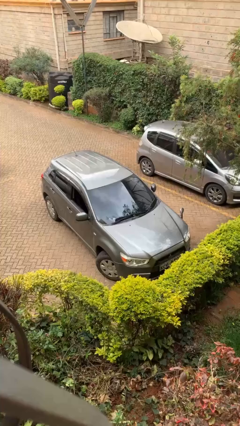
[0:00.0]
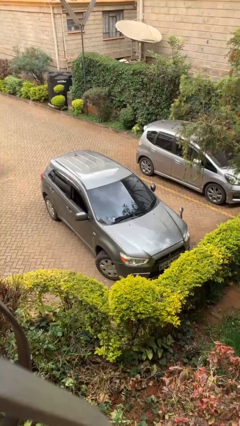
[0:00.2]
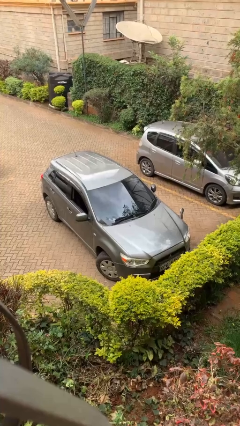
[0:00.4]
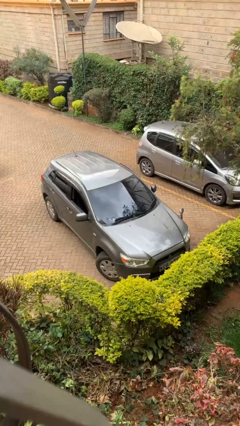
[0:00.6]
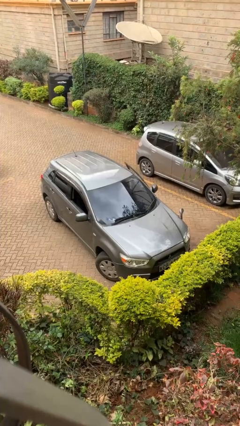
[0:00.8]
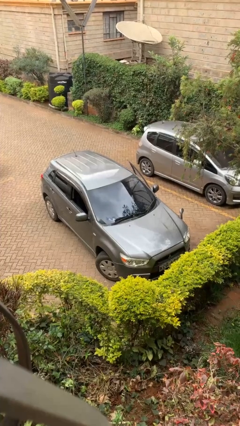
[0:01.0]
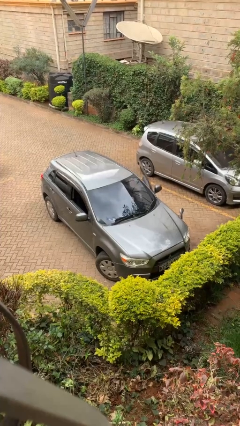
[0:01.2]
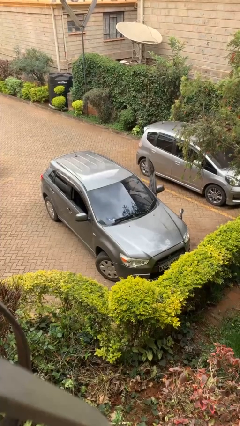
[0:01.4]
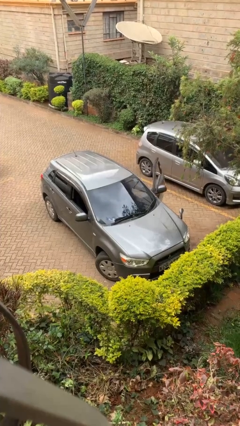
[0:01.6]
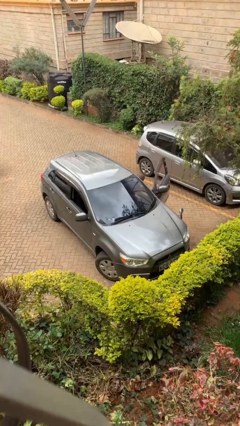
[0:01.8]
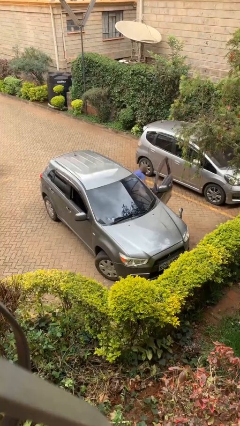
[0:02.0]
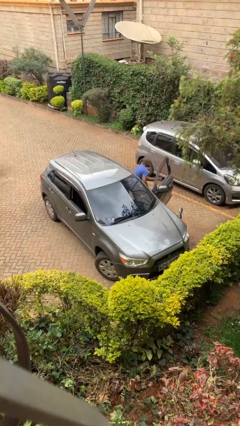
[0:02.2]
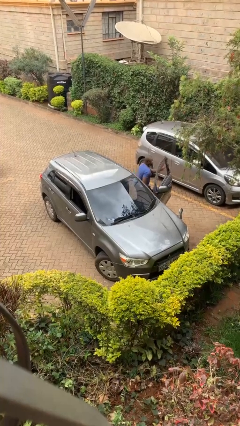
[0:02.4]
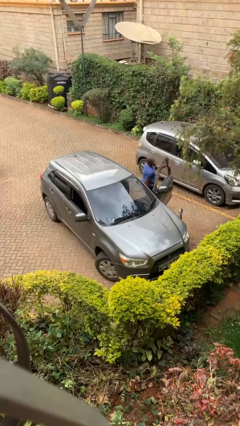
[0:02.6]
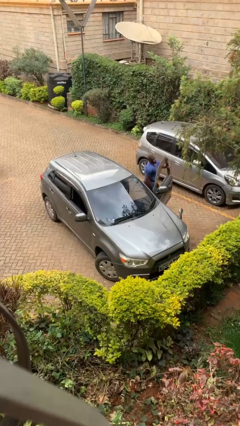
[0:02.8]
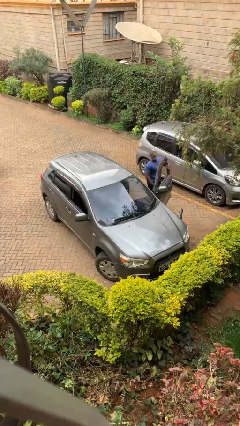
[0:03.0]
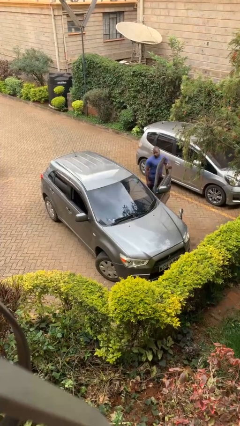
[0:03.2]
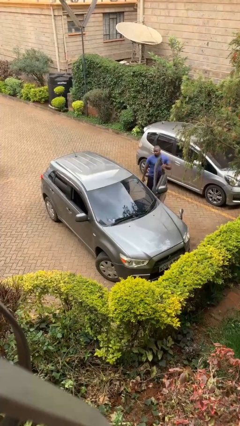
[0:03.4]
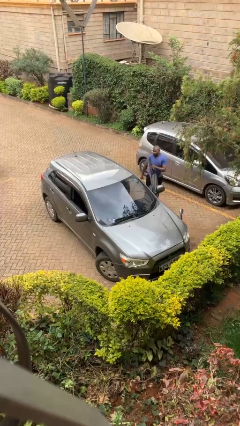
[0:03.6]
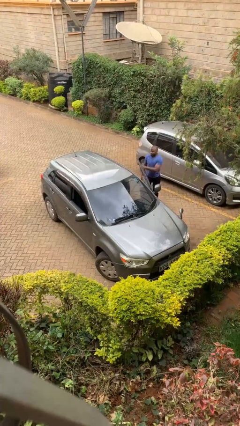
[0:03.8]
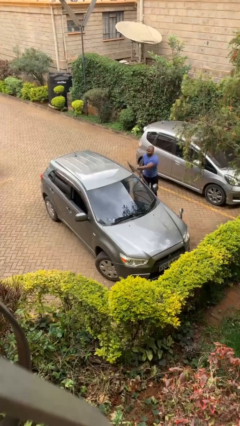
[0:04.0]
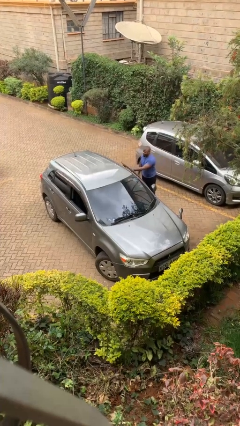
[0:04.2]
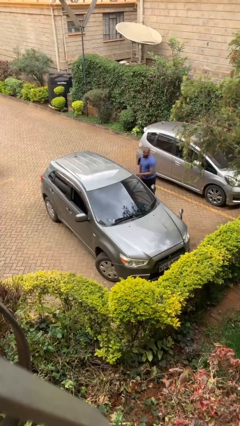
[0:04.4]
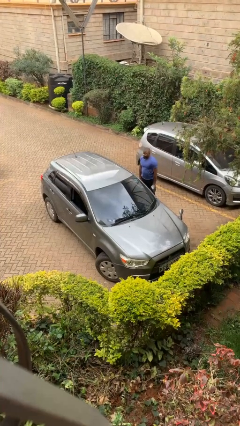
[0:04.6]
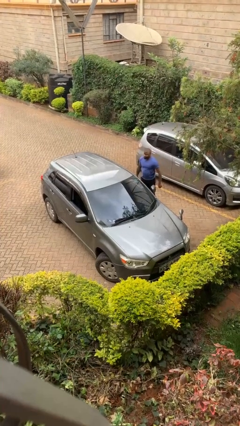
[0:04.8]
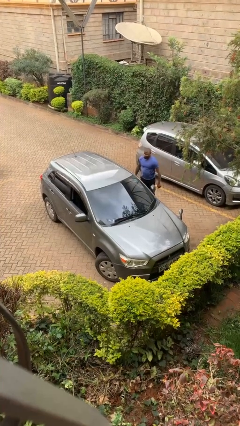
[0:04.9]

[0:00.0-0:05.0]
car drops off person

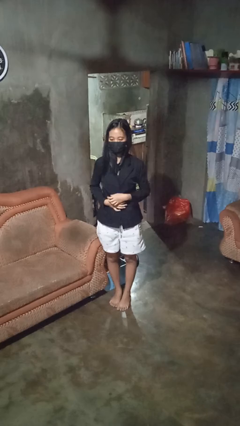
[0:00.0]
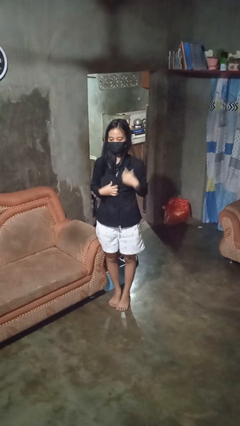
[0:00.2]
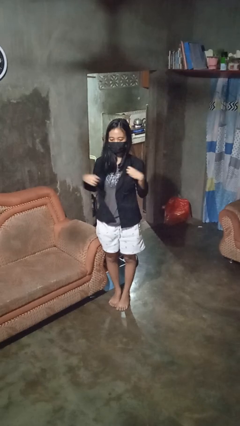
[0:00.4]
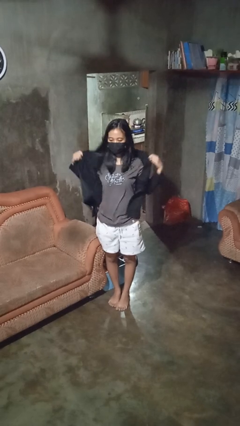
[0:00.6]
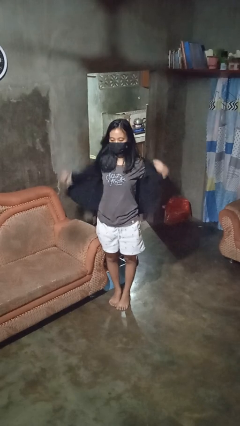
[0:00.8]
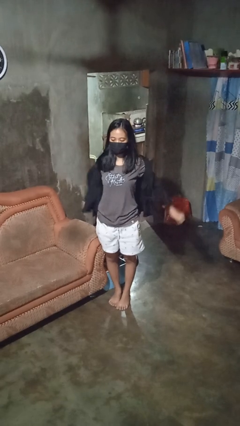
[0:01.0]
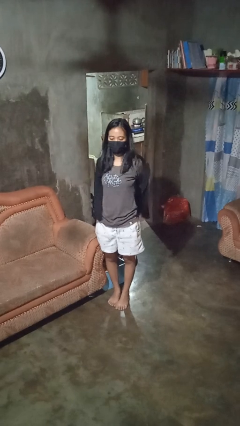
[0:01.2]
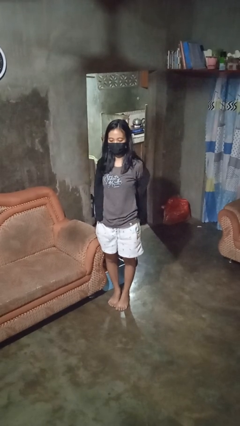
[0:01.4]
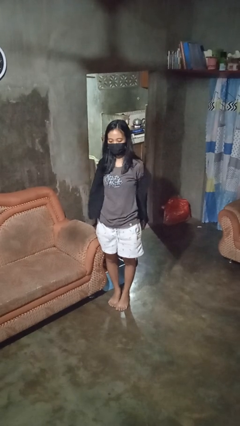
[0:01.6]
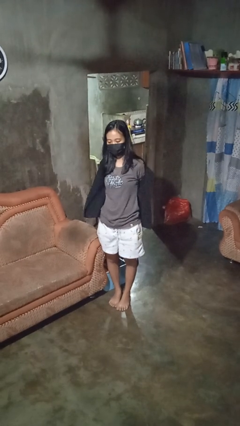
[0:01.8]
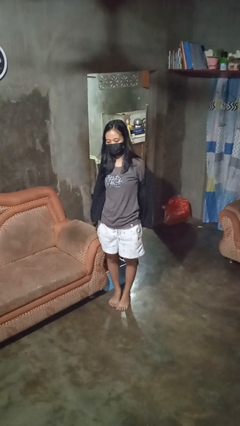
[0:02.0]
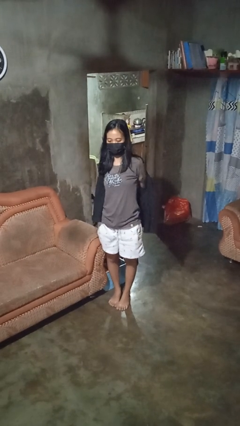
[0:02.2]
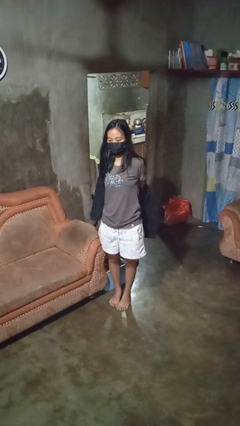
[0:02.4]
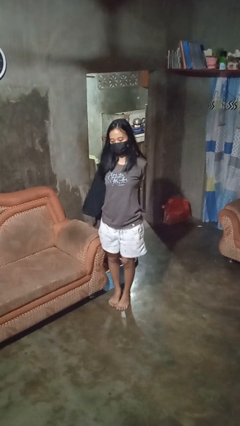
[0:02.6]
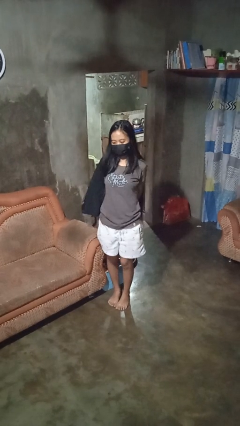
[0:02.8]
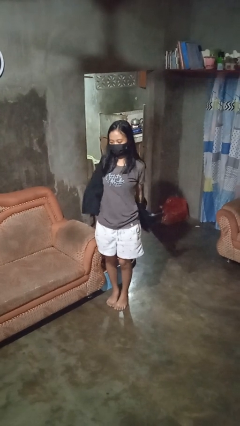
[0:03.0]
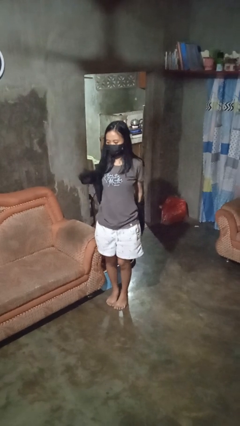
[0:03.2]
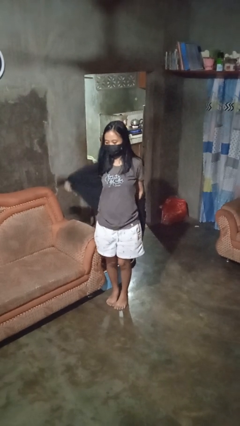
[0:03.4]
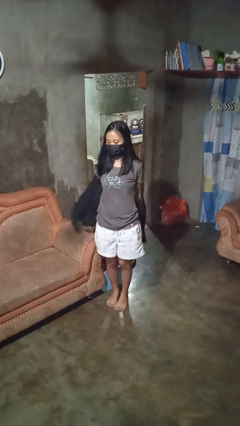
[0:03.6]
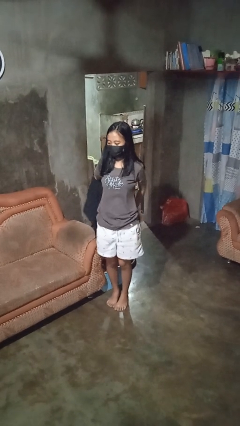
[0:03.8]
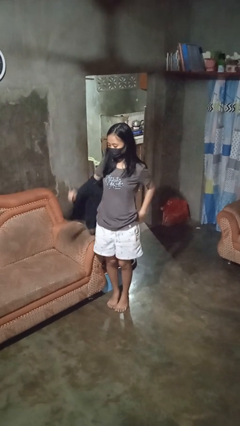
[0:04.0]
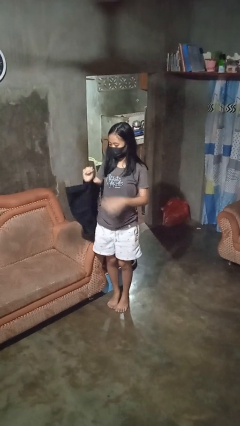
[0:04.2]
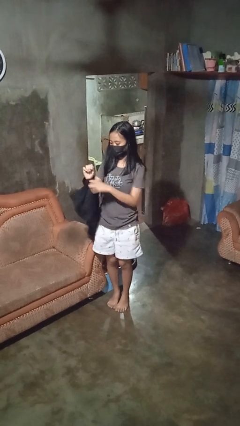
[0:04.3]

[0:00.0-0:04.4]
person takes off shirt

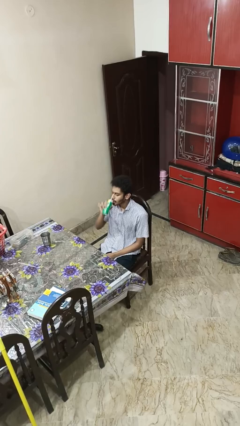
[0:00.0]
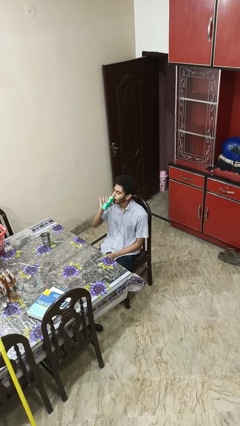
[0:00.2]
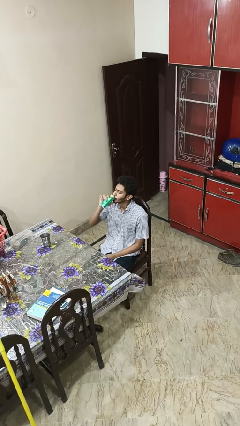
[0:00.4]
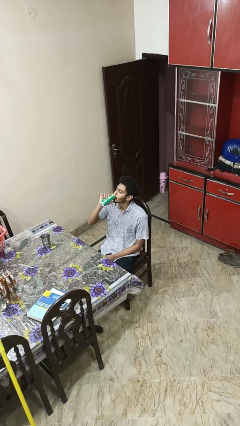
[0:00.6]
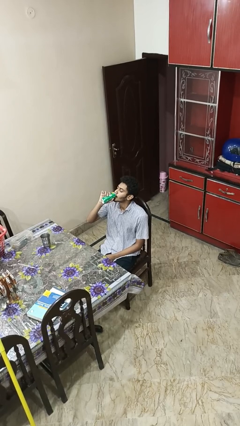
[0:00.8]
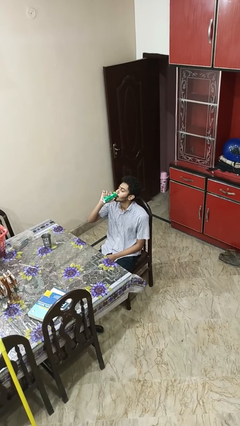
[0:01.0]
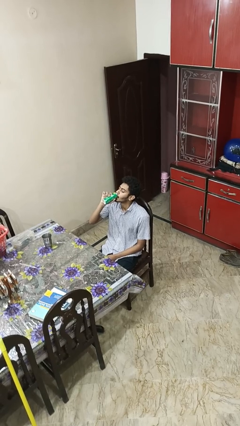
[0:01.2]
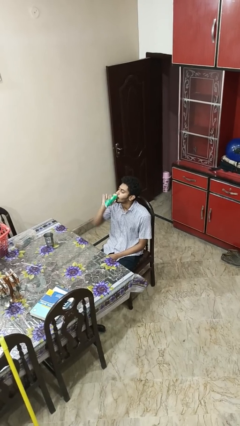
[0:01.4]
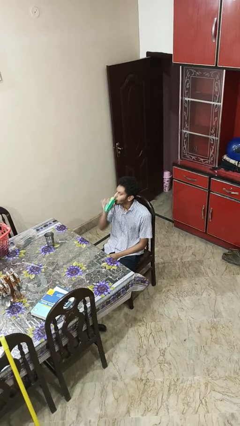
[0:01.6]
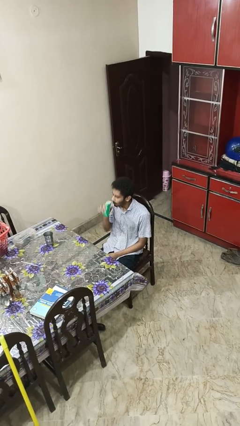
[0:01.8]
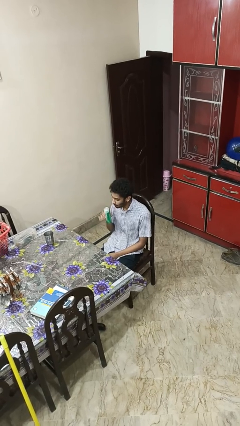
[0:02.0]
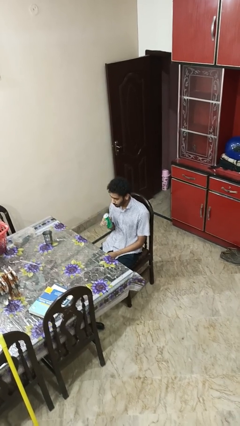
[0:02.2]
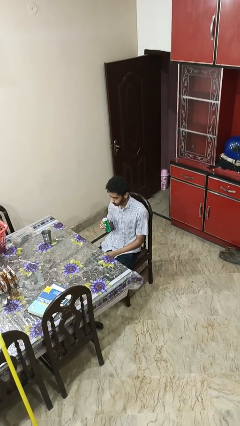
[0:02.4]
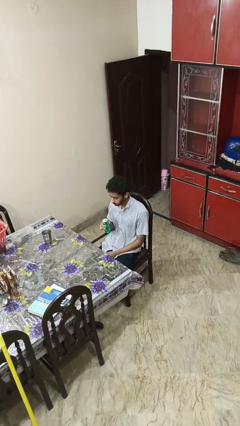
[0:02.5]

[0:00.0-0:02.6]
person drinks from beverage can

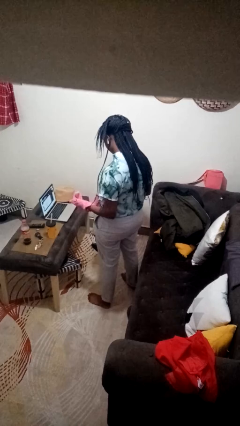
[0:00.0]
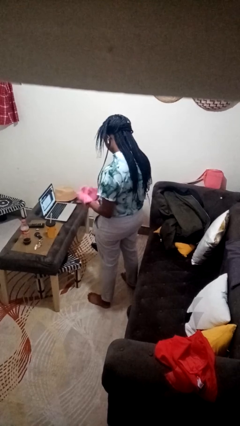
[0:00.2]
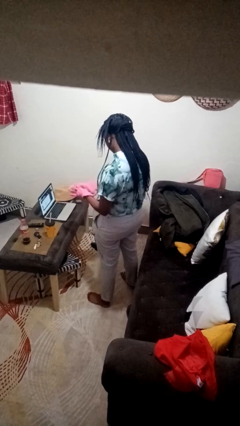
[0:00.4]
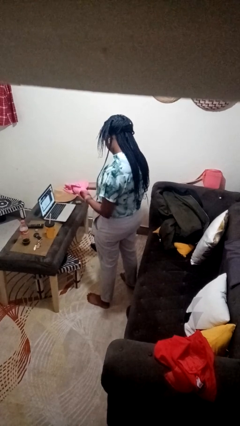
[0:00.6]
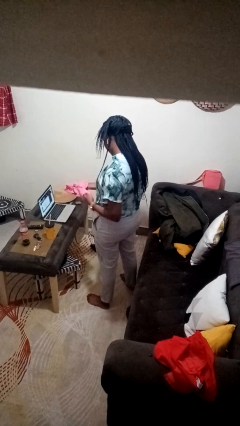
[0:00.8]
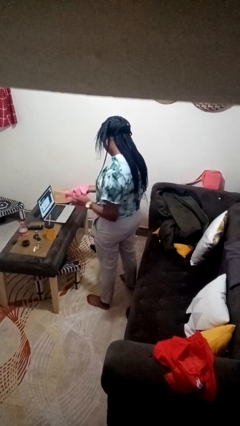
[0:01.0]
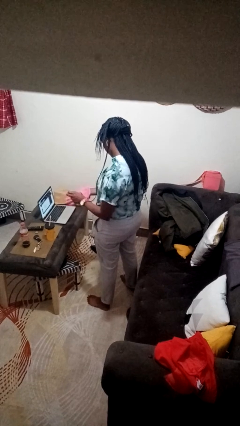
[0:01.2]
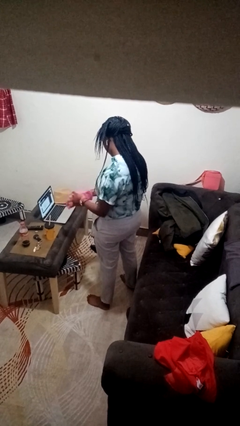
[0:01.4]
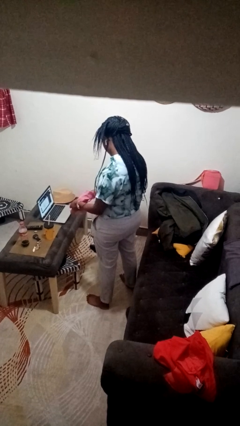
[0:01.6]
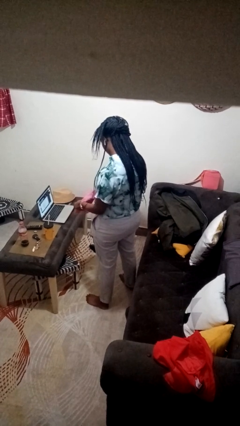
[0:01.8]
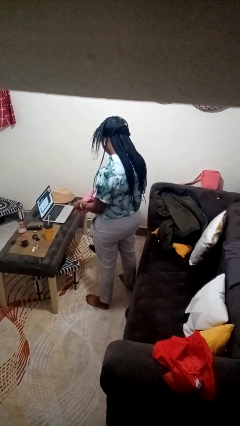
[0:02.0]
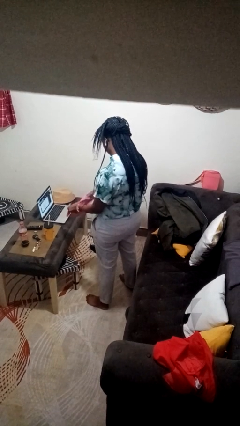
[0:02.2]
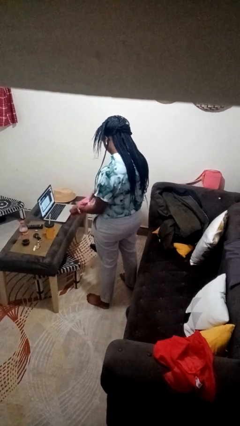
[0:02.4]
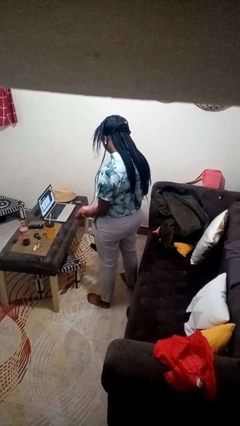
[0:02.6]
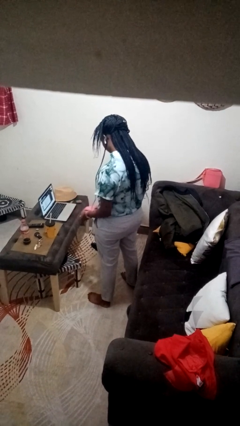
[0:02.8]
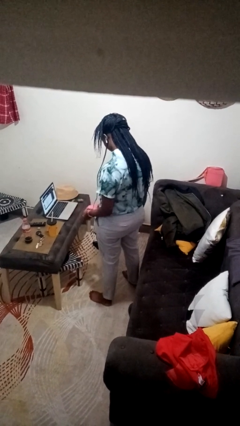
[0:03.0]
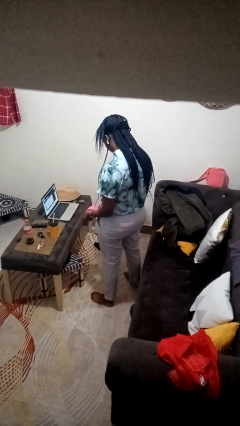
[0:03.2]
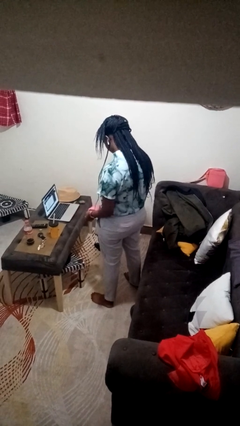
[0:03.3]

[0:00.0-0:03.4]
person takes off gloves

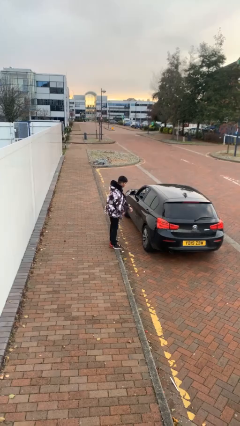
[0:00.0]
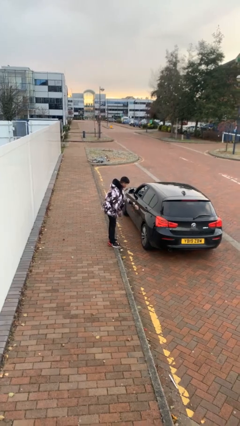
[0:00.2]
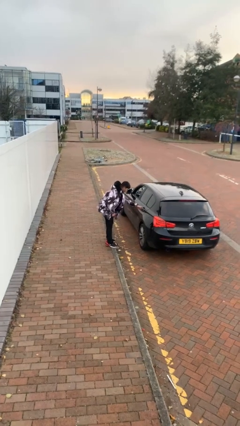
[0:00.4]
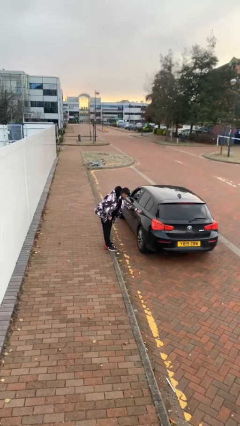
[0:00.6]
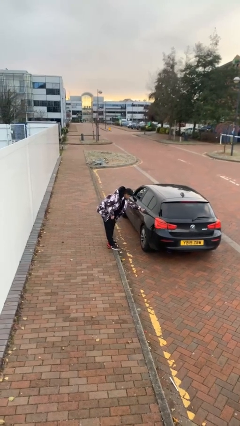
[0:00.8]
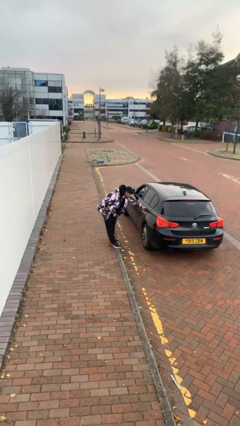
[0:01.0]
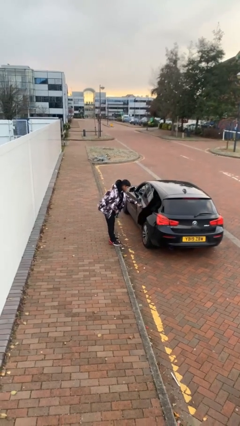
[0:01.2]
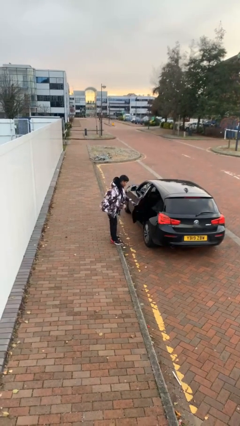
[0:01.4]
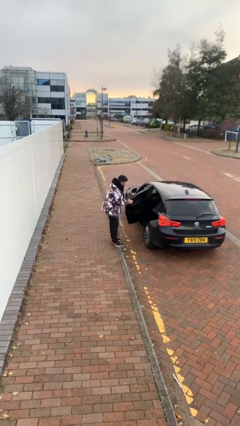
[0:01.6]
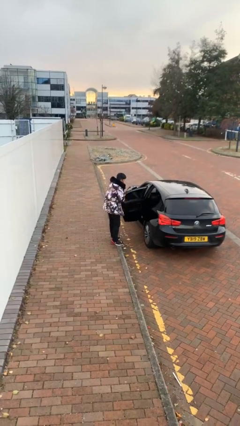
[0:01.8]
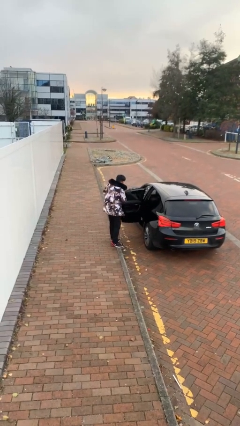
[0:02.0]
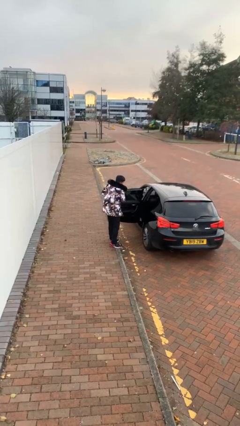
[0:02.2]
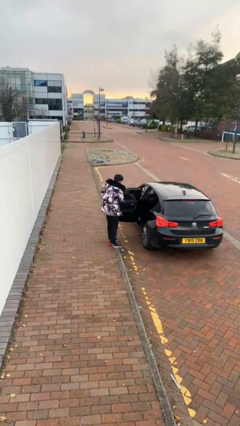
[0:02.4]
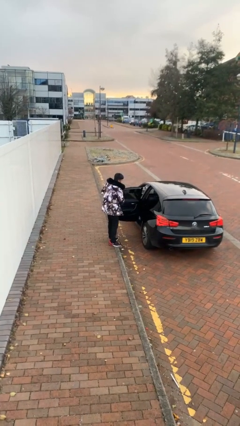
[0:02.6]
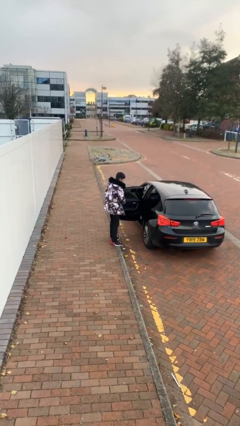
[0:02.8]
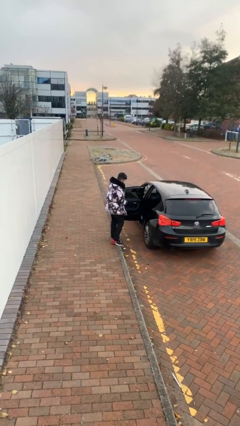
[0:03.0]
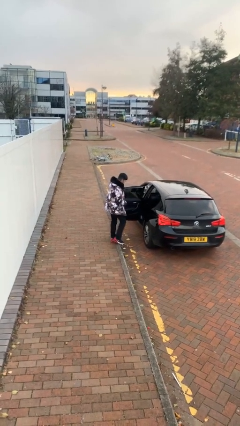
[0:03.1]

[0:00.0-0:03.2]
person opens car door
